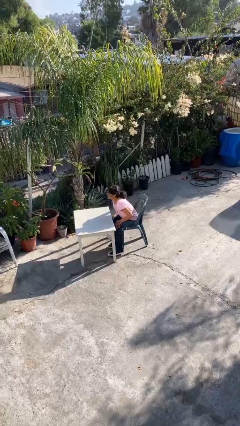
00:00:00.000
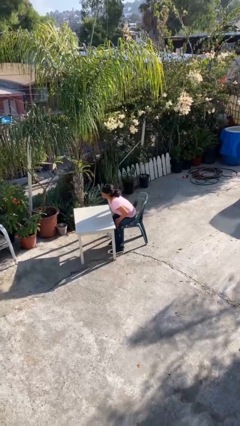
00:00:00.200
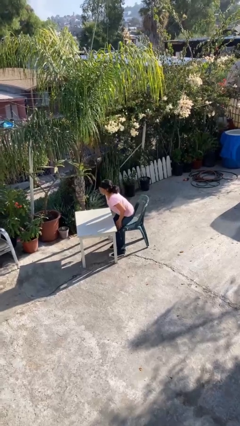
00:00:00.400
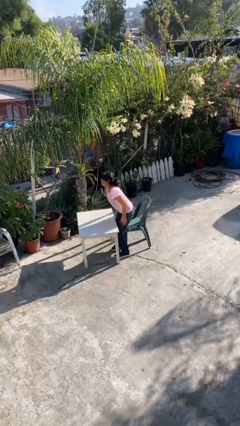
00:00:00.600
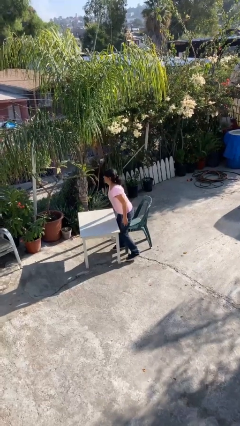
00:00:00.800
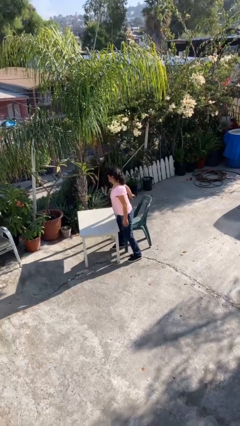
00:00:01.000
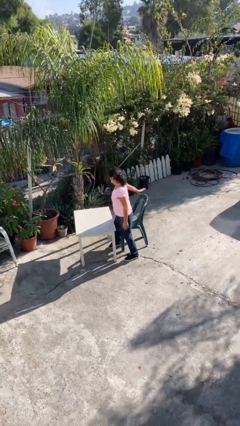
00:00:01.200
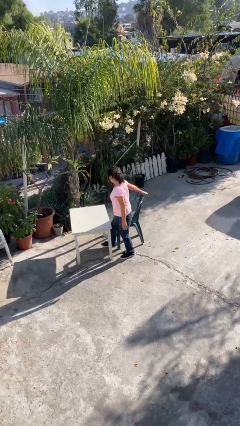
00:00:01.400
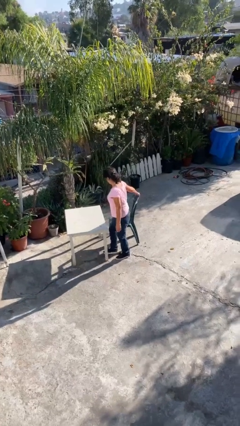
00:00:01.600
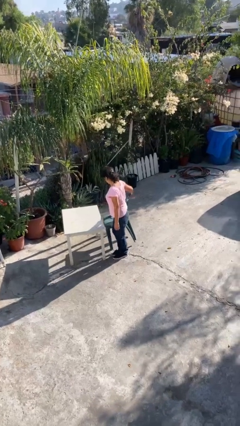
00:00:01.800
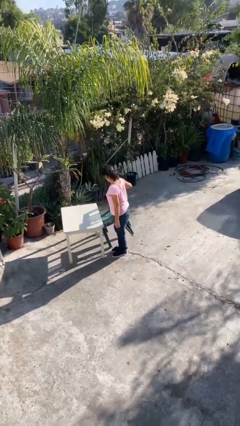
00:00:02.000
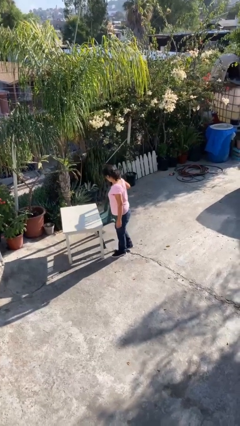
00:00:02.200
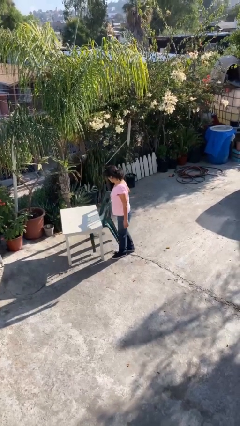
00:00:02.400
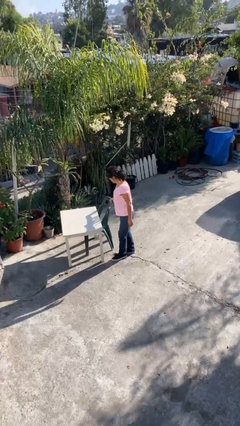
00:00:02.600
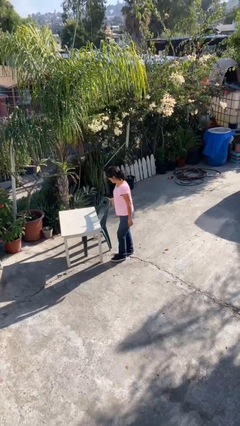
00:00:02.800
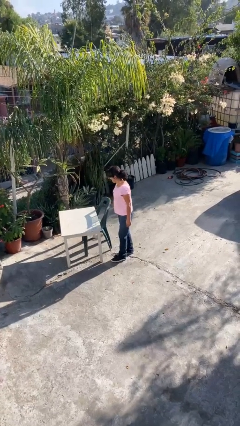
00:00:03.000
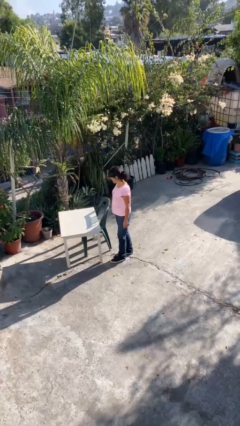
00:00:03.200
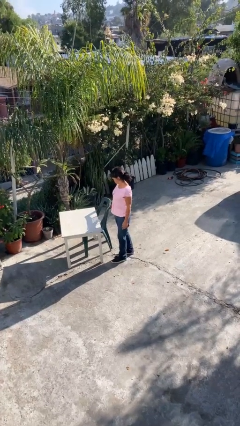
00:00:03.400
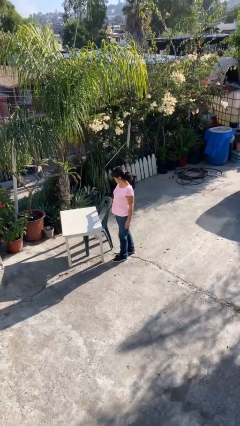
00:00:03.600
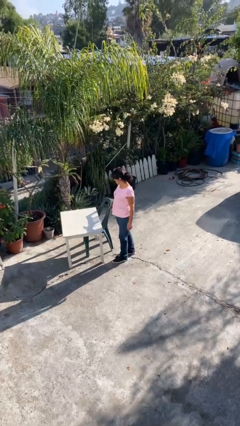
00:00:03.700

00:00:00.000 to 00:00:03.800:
person stands up

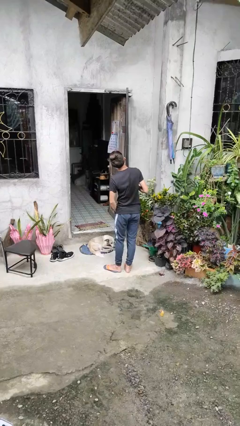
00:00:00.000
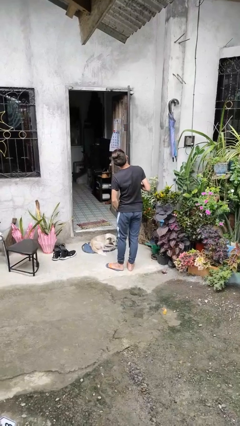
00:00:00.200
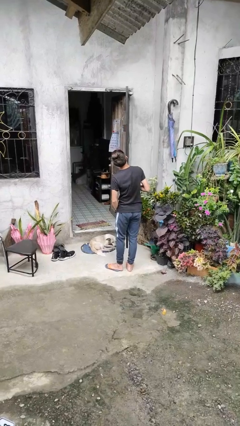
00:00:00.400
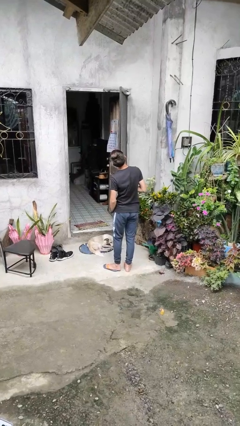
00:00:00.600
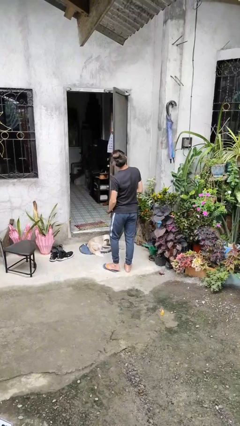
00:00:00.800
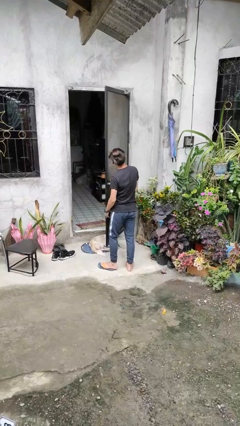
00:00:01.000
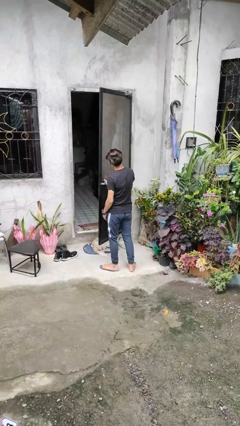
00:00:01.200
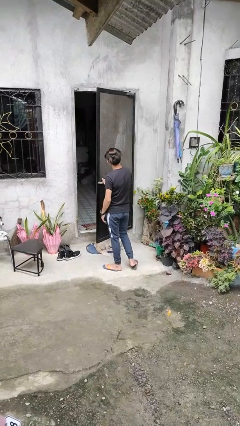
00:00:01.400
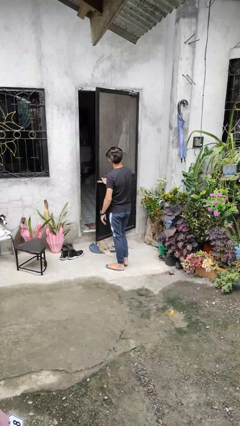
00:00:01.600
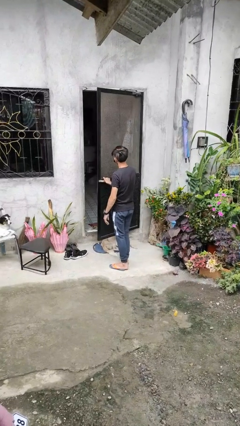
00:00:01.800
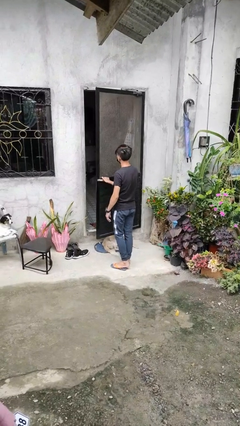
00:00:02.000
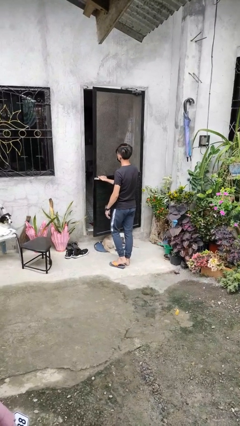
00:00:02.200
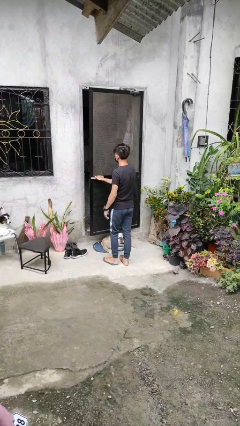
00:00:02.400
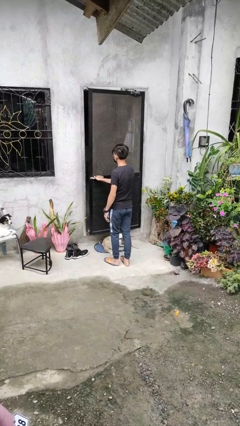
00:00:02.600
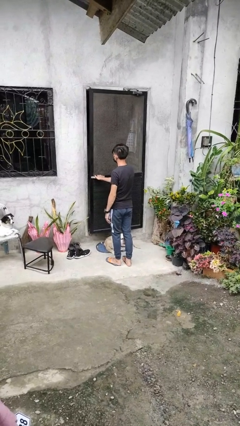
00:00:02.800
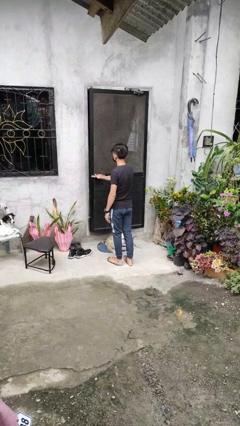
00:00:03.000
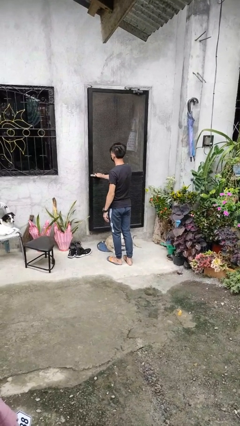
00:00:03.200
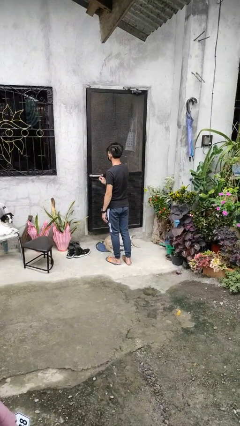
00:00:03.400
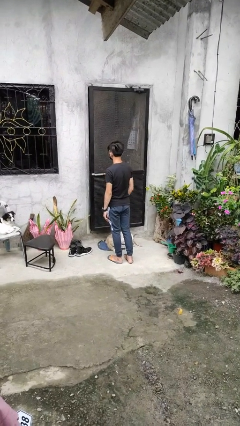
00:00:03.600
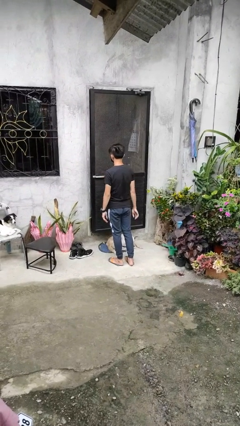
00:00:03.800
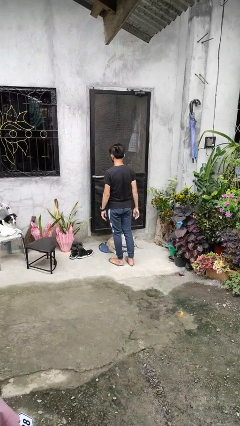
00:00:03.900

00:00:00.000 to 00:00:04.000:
person closes facility door

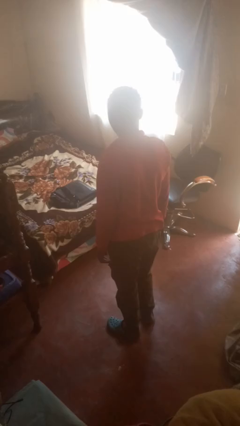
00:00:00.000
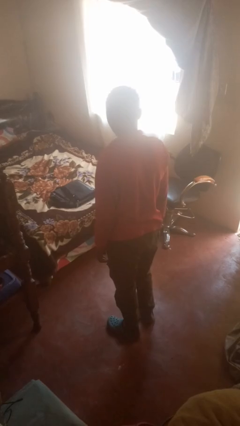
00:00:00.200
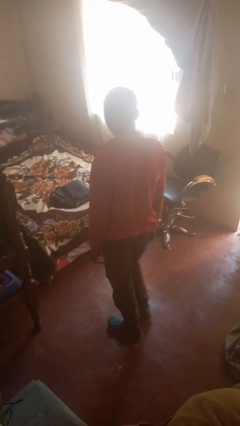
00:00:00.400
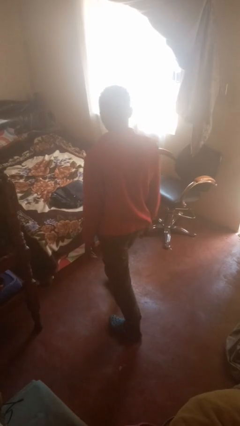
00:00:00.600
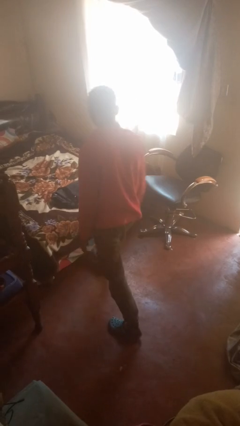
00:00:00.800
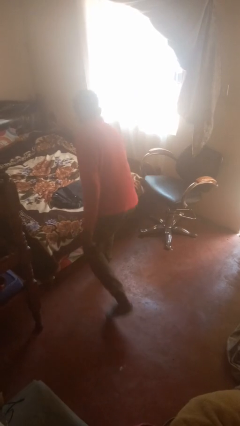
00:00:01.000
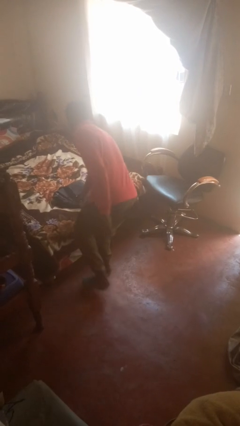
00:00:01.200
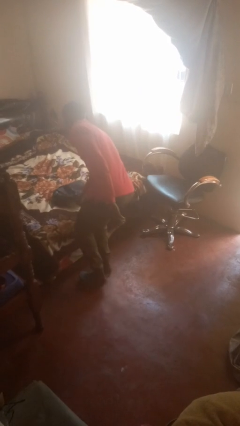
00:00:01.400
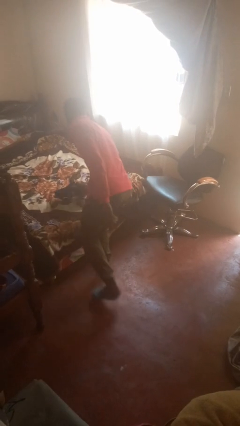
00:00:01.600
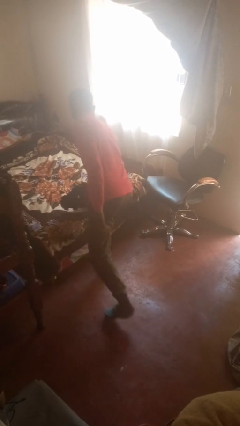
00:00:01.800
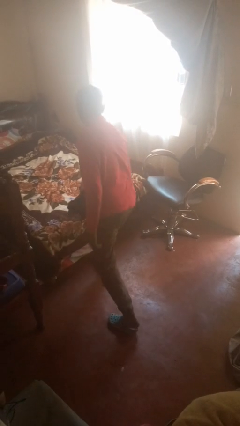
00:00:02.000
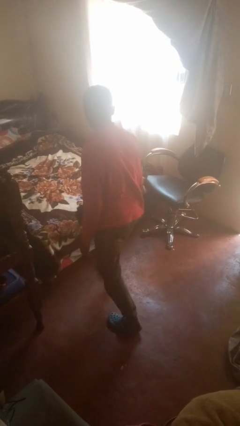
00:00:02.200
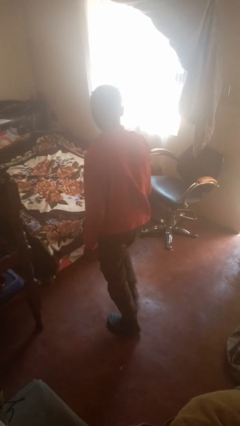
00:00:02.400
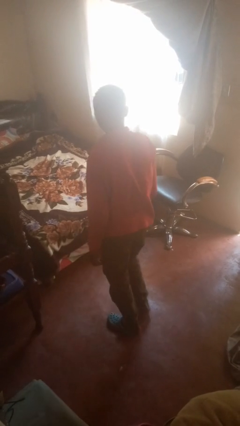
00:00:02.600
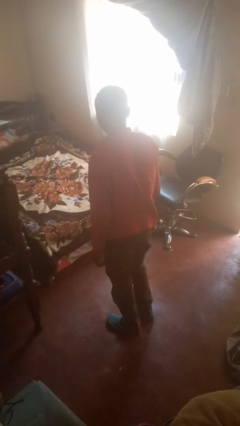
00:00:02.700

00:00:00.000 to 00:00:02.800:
person picks up object from bed

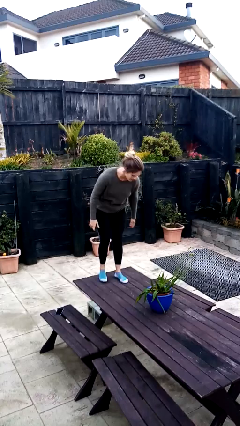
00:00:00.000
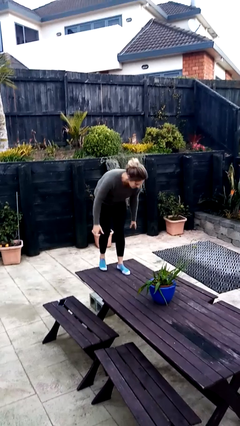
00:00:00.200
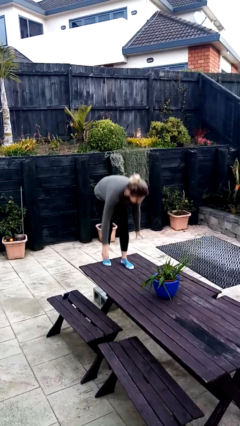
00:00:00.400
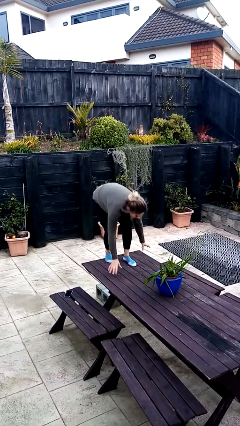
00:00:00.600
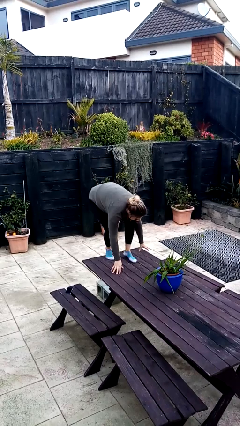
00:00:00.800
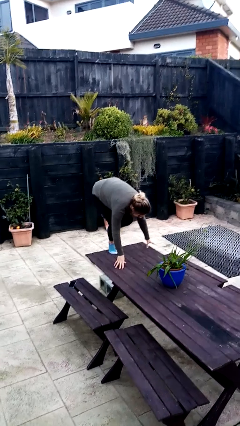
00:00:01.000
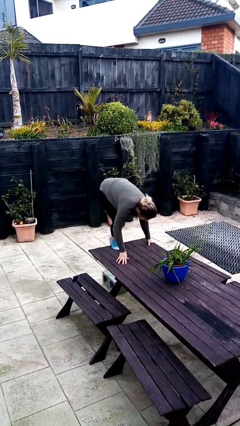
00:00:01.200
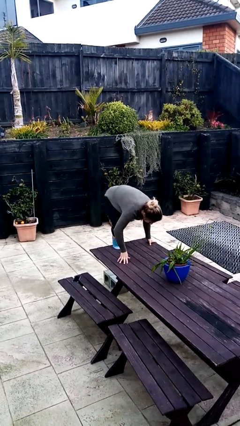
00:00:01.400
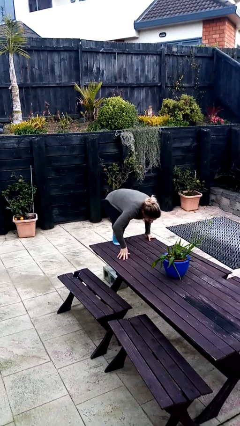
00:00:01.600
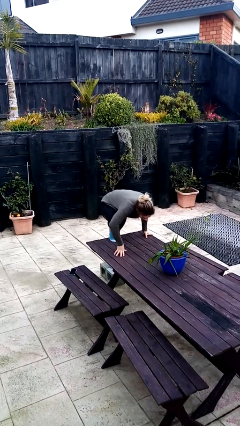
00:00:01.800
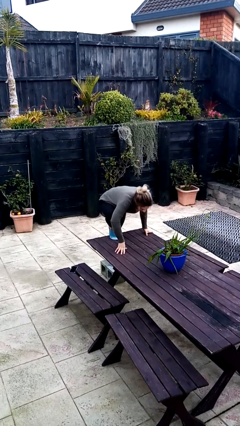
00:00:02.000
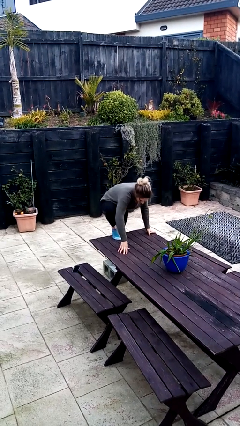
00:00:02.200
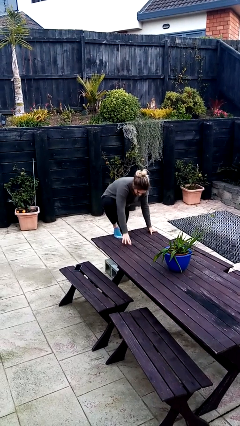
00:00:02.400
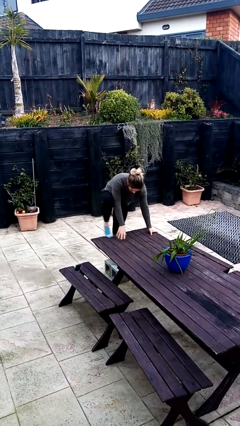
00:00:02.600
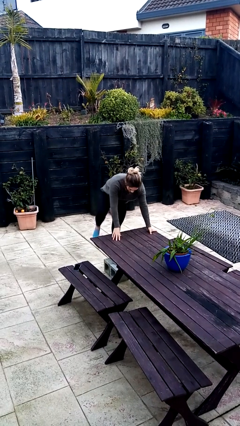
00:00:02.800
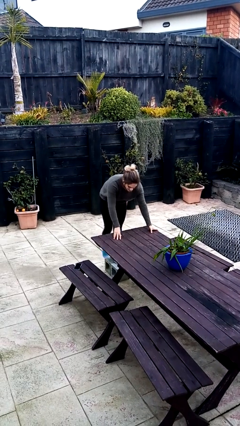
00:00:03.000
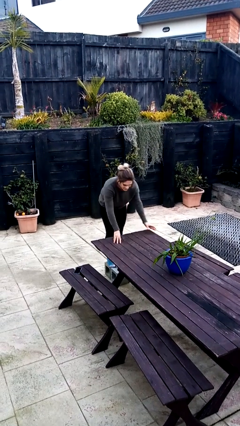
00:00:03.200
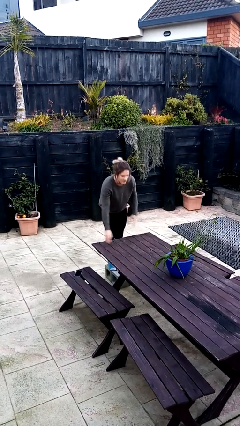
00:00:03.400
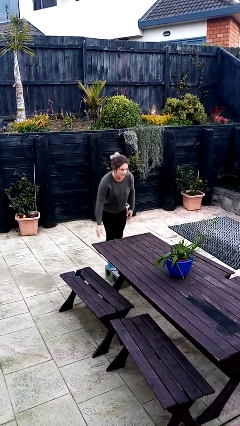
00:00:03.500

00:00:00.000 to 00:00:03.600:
person climbs off table

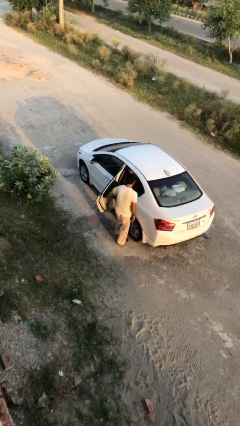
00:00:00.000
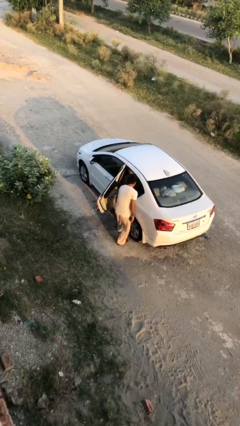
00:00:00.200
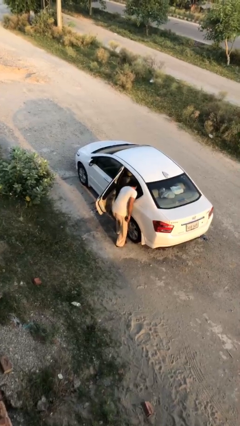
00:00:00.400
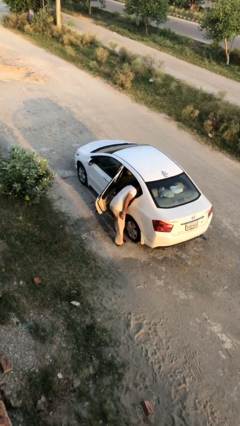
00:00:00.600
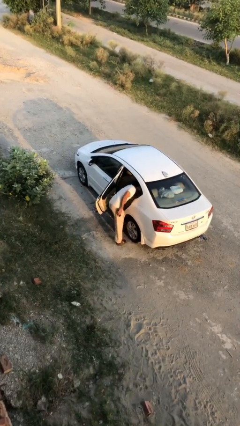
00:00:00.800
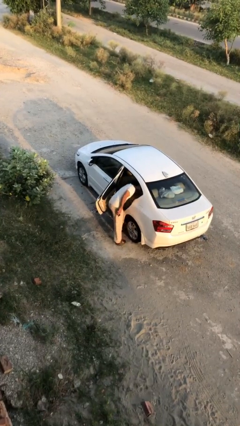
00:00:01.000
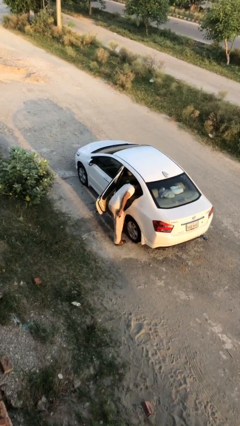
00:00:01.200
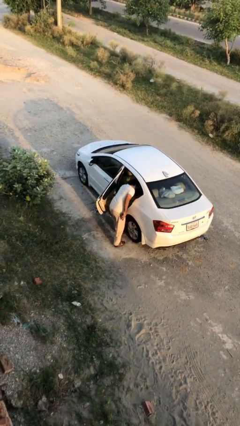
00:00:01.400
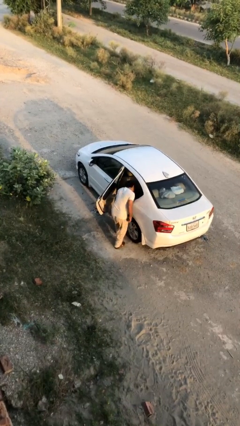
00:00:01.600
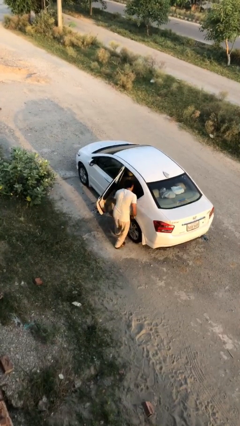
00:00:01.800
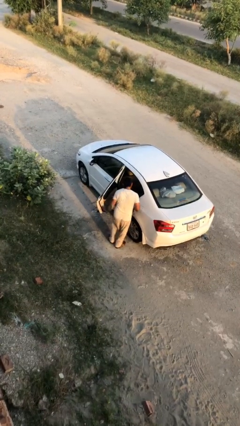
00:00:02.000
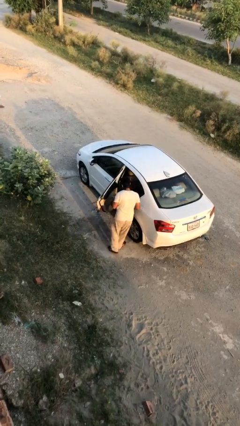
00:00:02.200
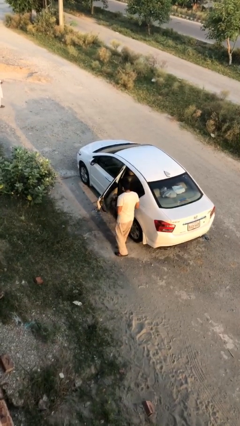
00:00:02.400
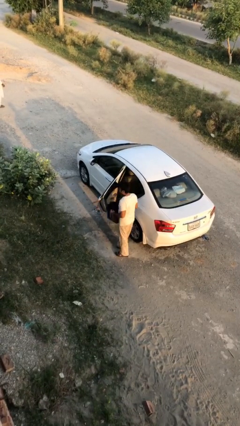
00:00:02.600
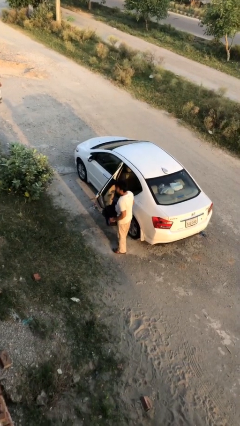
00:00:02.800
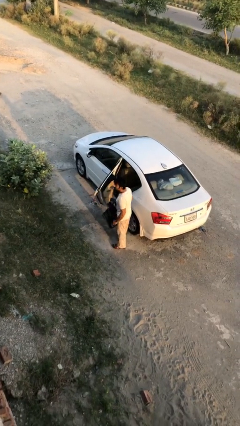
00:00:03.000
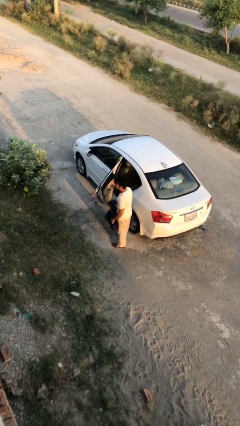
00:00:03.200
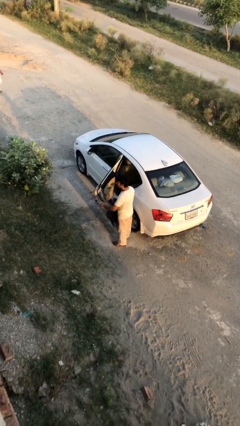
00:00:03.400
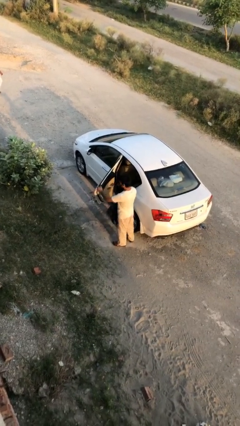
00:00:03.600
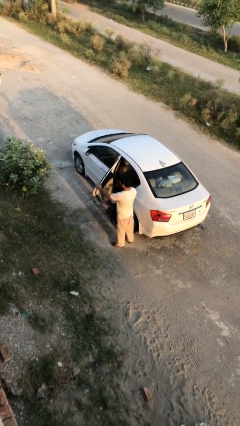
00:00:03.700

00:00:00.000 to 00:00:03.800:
person unloads car
